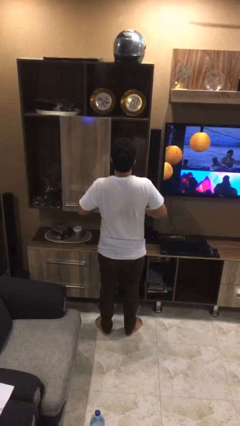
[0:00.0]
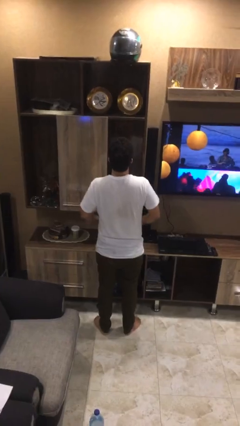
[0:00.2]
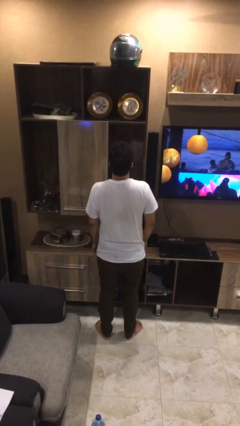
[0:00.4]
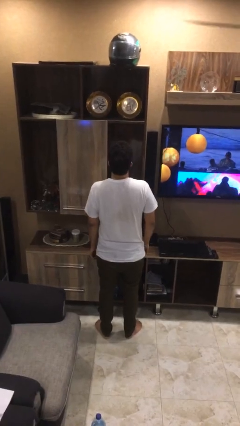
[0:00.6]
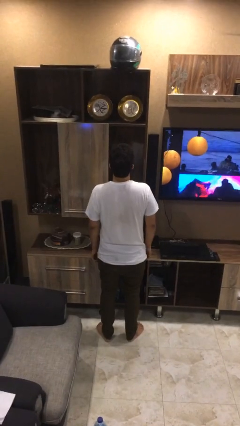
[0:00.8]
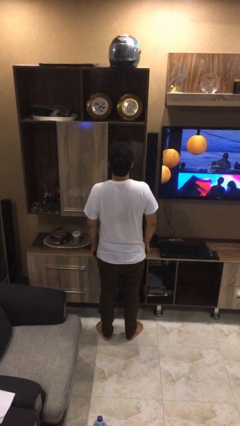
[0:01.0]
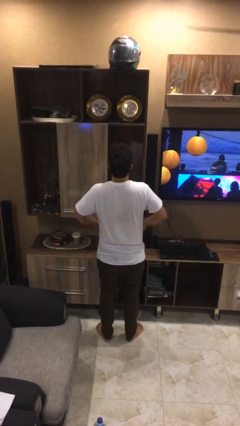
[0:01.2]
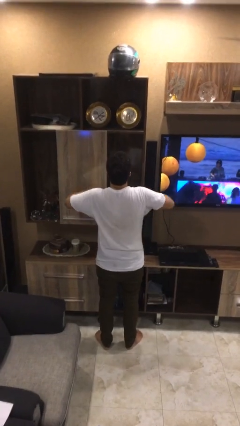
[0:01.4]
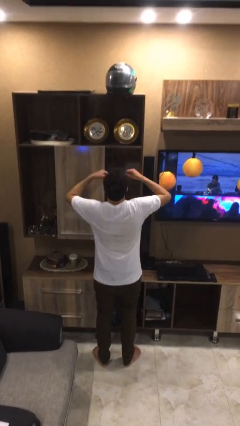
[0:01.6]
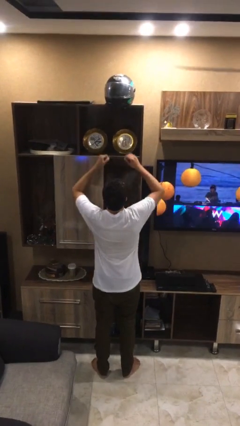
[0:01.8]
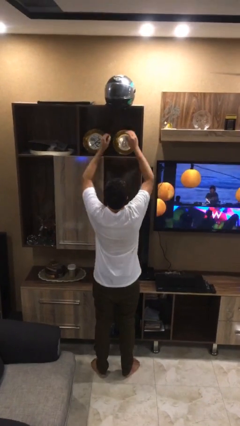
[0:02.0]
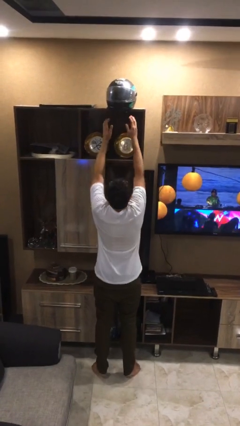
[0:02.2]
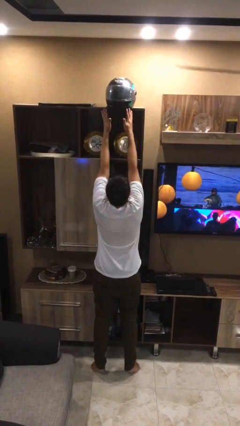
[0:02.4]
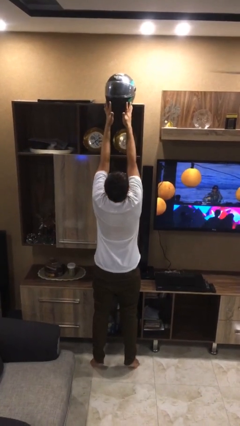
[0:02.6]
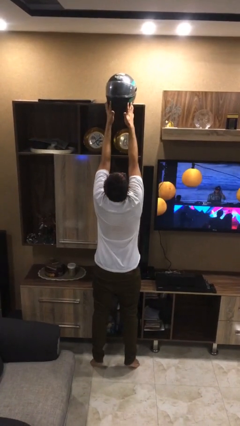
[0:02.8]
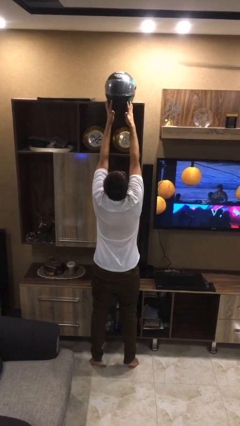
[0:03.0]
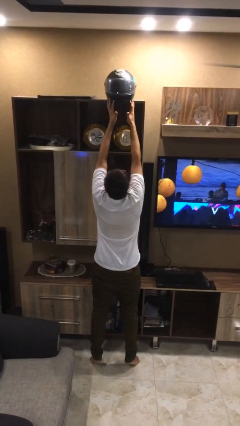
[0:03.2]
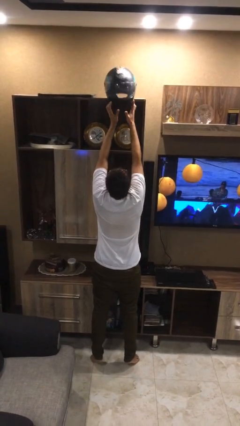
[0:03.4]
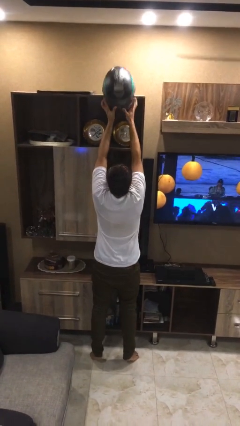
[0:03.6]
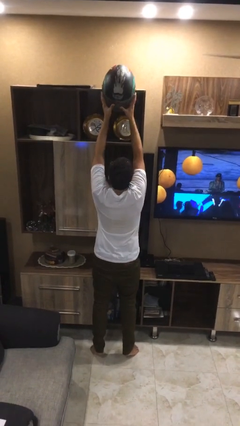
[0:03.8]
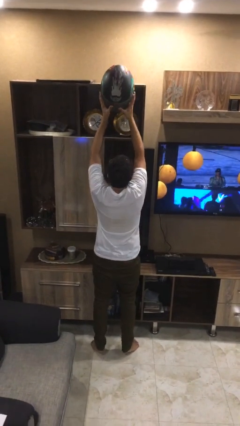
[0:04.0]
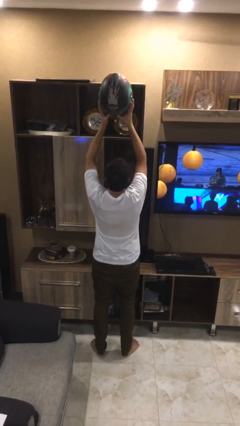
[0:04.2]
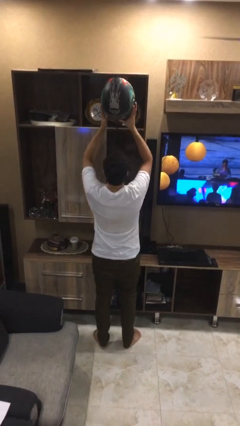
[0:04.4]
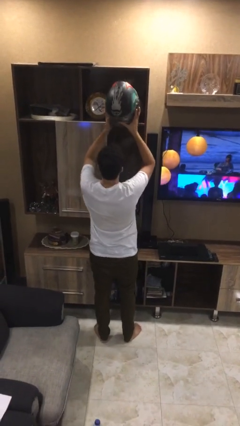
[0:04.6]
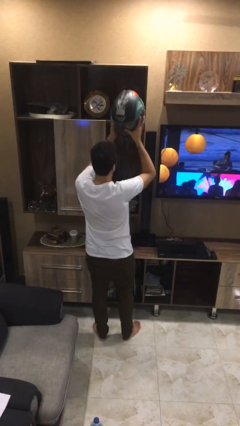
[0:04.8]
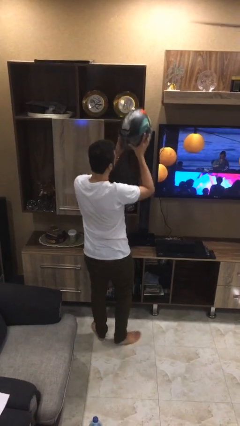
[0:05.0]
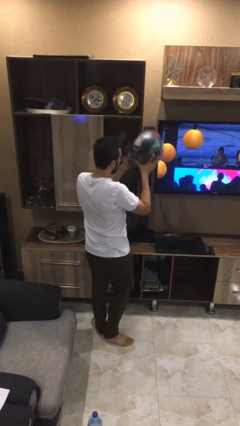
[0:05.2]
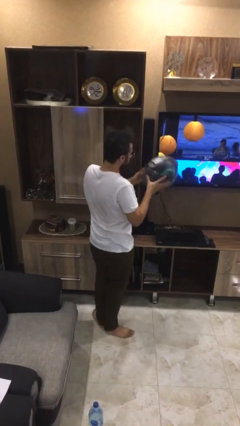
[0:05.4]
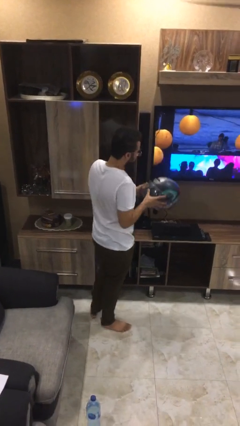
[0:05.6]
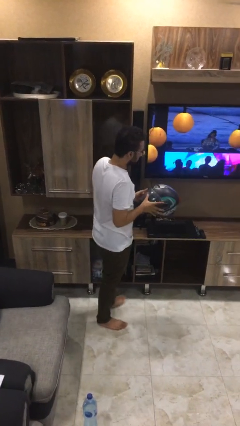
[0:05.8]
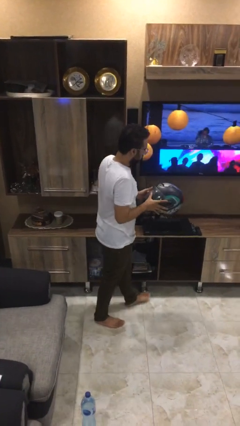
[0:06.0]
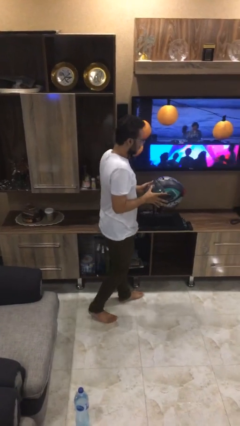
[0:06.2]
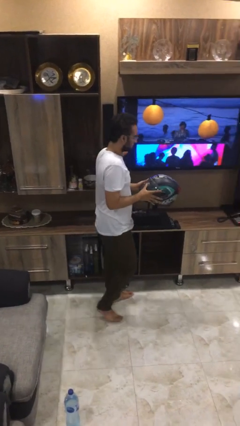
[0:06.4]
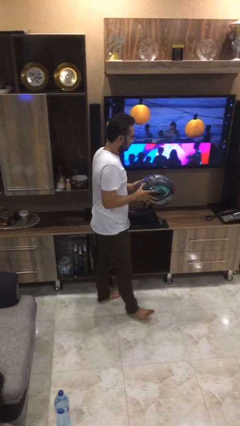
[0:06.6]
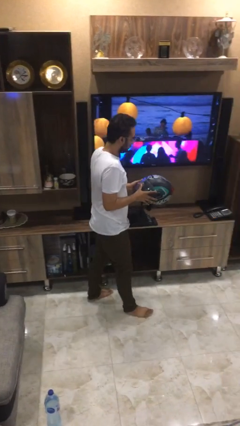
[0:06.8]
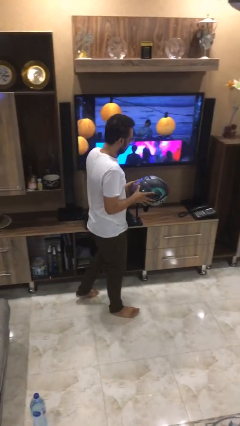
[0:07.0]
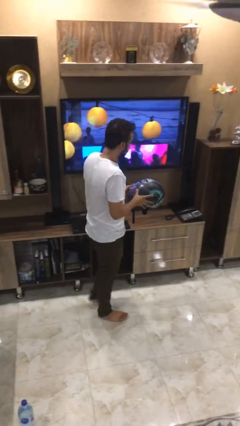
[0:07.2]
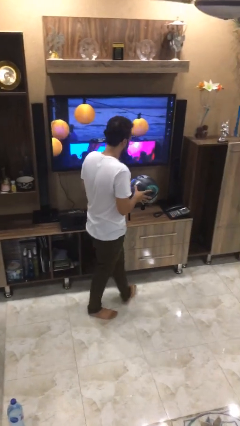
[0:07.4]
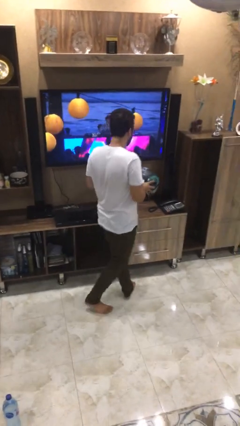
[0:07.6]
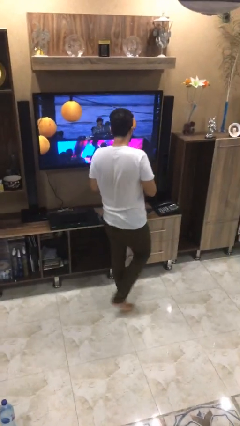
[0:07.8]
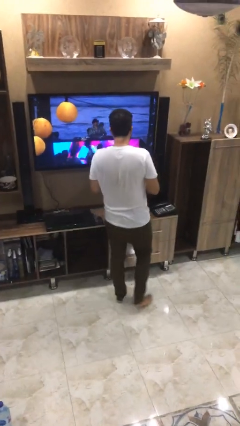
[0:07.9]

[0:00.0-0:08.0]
person picks up object from shelf

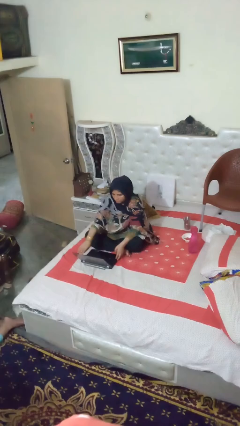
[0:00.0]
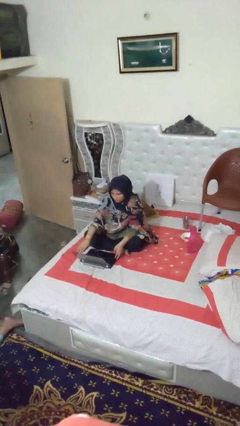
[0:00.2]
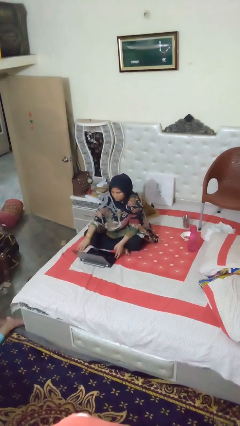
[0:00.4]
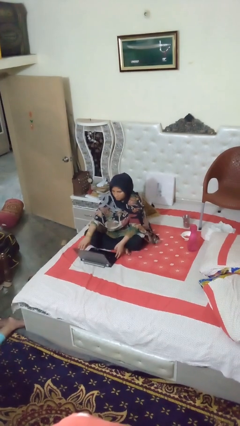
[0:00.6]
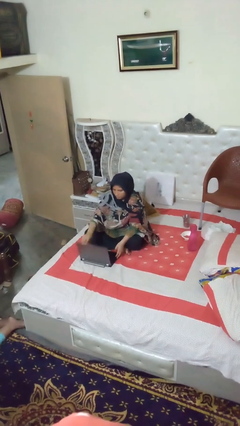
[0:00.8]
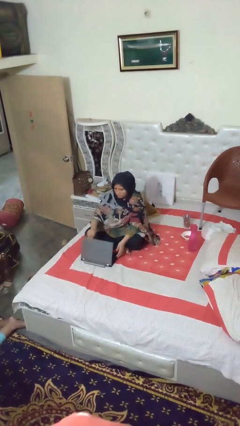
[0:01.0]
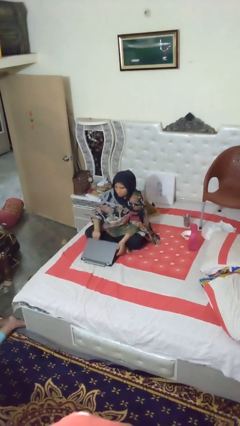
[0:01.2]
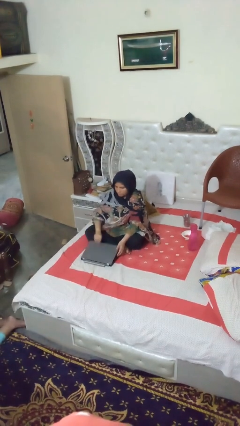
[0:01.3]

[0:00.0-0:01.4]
person closes laptop

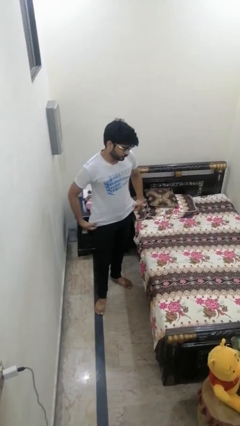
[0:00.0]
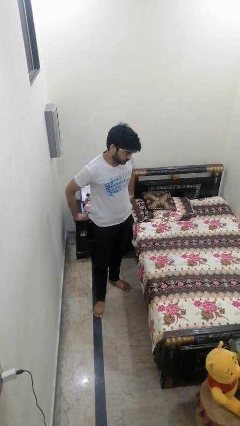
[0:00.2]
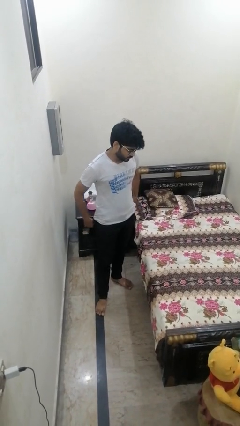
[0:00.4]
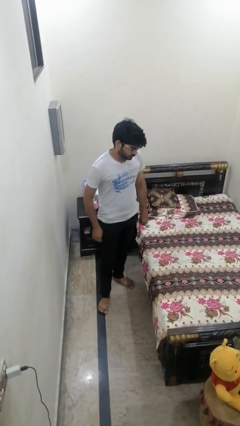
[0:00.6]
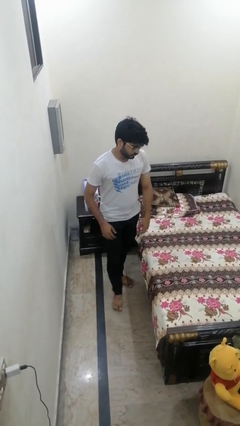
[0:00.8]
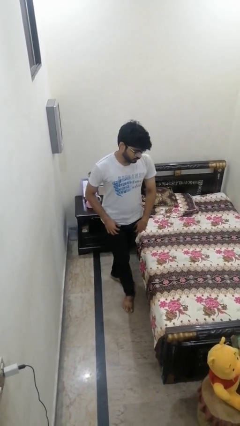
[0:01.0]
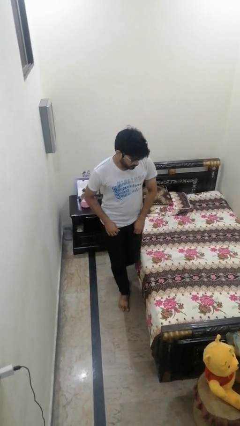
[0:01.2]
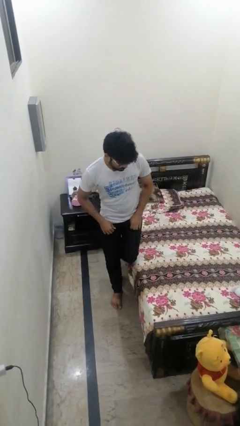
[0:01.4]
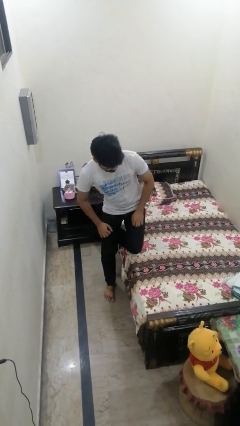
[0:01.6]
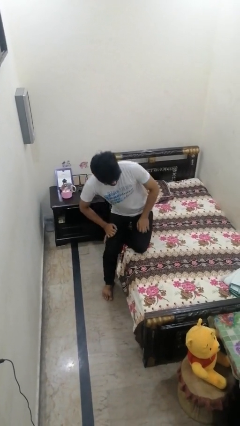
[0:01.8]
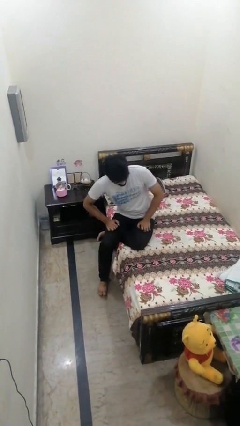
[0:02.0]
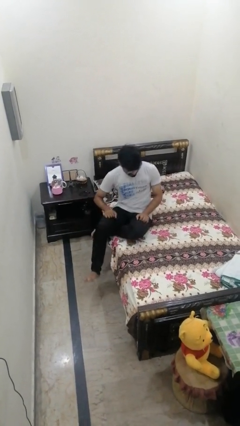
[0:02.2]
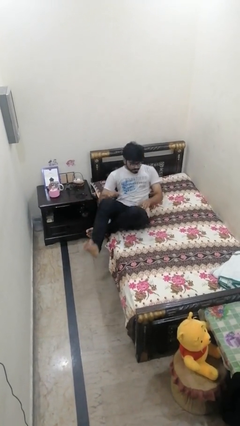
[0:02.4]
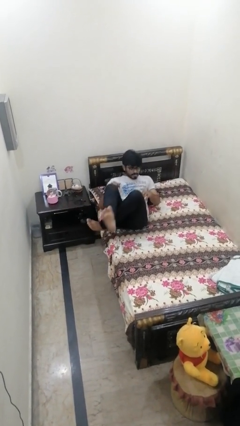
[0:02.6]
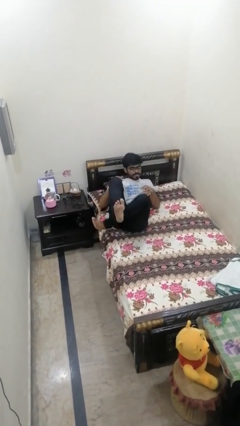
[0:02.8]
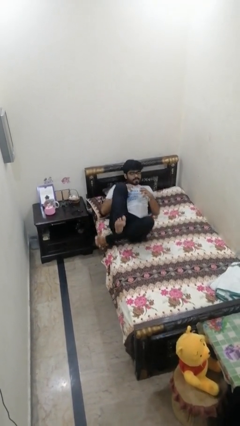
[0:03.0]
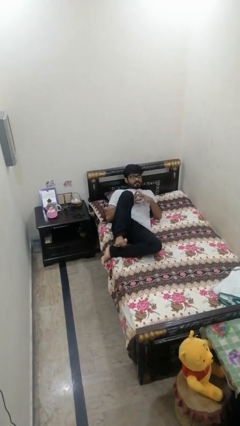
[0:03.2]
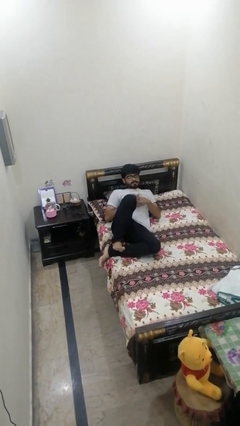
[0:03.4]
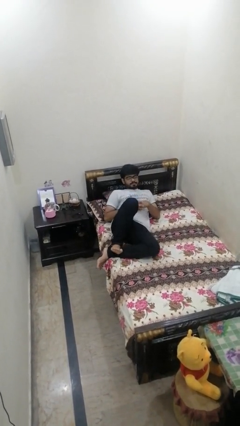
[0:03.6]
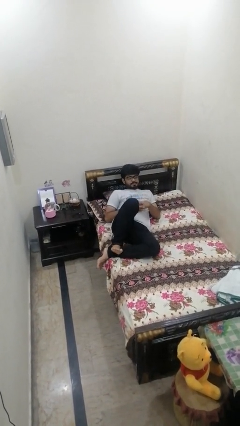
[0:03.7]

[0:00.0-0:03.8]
person lies down on bed

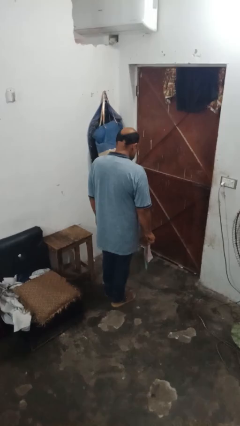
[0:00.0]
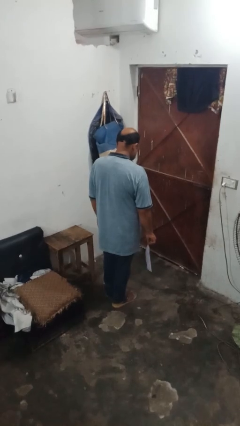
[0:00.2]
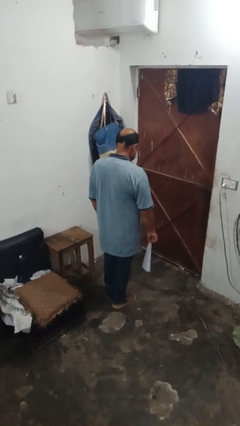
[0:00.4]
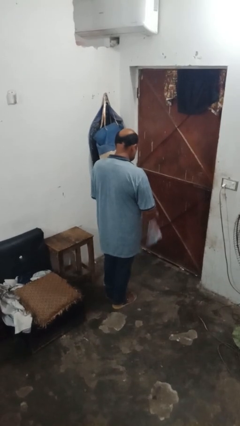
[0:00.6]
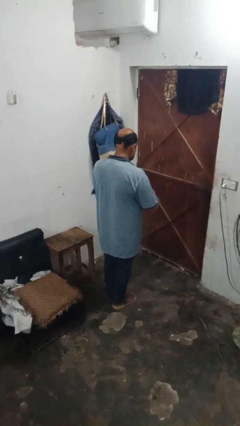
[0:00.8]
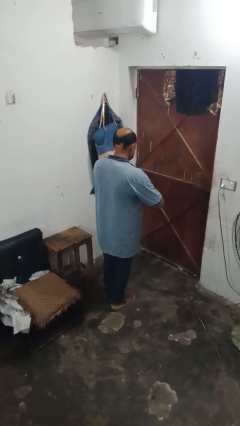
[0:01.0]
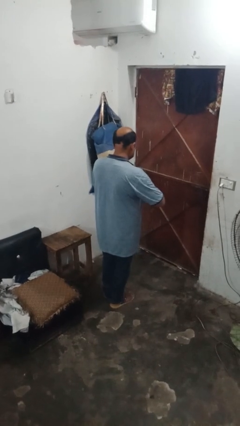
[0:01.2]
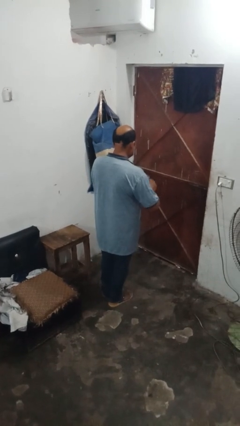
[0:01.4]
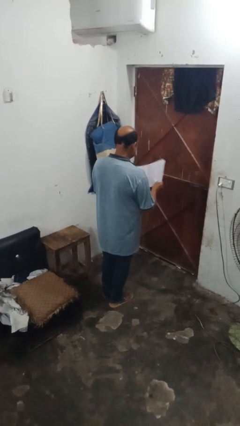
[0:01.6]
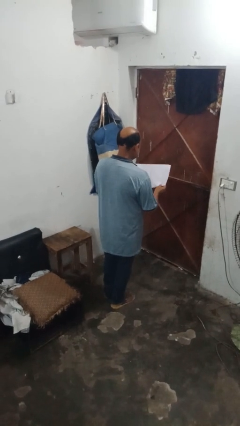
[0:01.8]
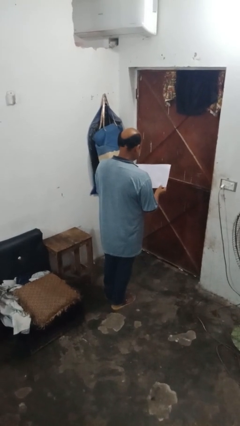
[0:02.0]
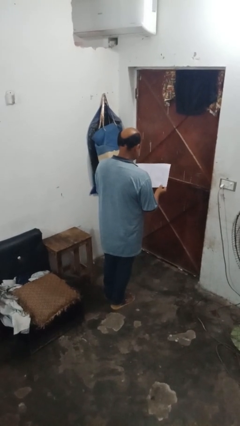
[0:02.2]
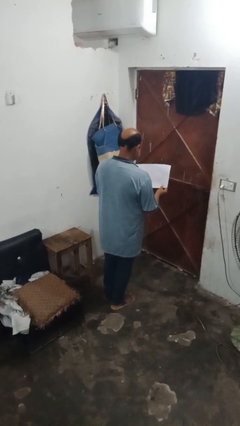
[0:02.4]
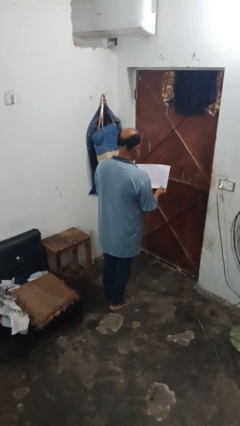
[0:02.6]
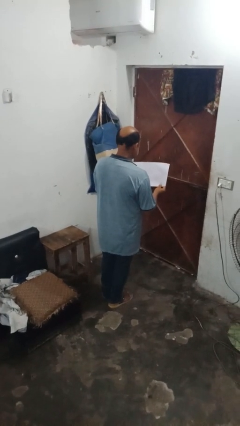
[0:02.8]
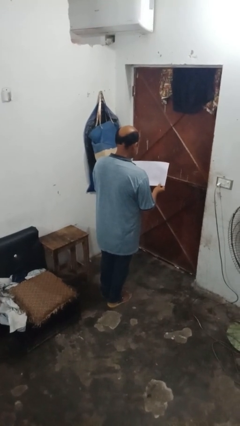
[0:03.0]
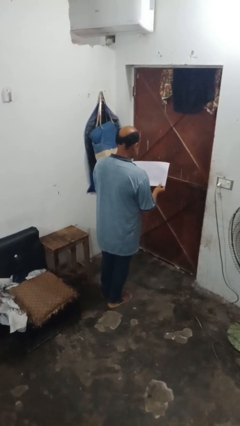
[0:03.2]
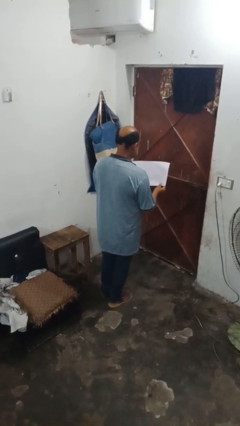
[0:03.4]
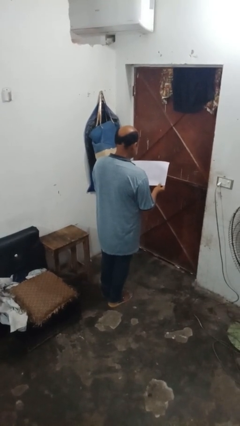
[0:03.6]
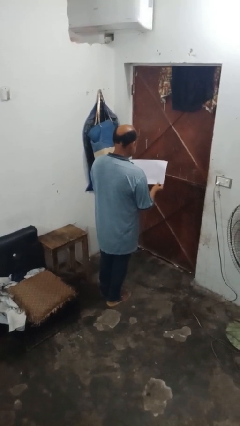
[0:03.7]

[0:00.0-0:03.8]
person reads newspaper

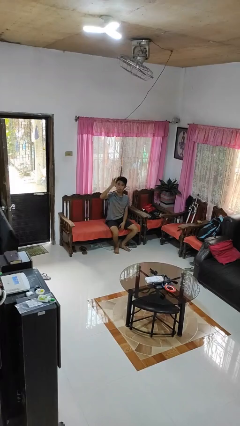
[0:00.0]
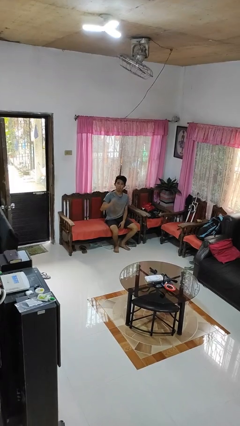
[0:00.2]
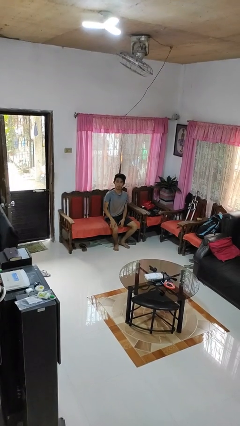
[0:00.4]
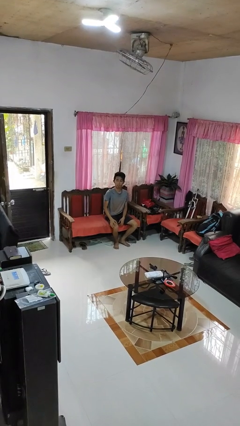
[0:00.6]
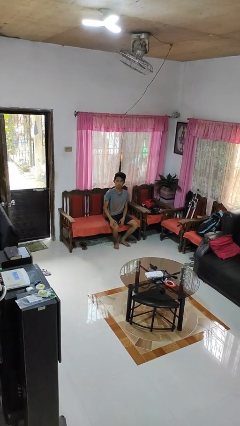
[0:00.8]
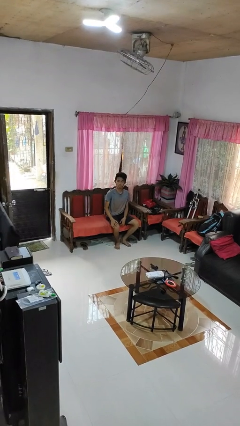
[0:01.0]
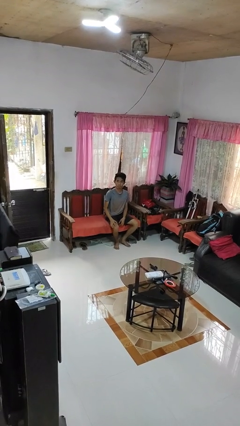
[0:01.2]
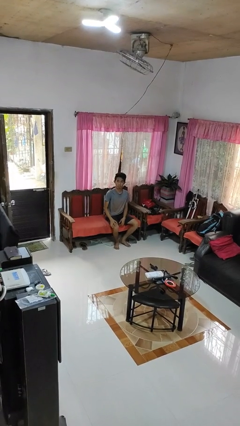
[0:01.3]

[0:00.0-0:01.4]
person gestures lower hand
